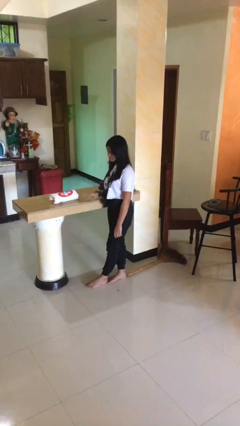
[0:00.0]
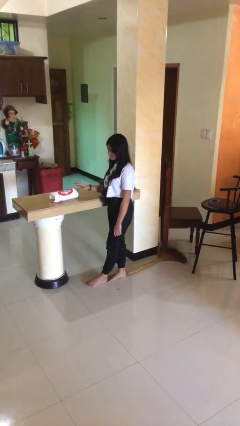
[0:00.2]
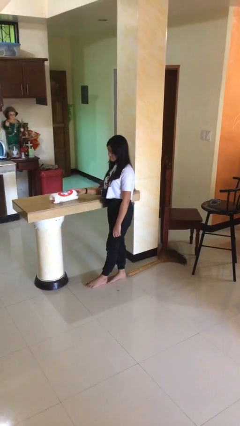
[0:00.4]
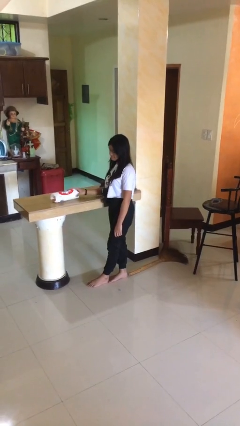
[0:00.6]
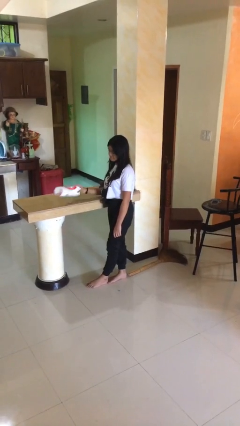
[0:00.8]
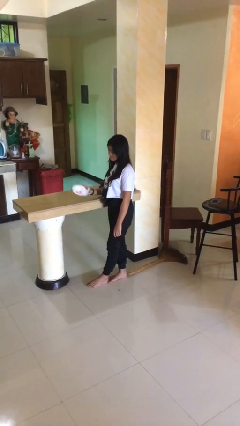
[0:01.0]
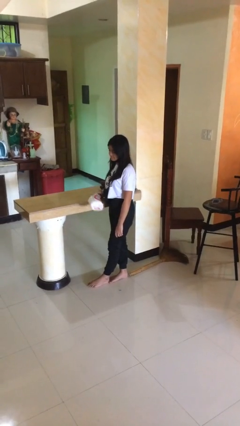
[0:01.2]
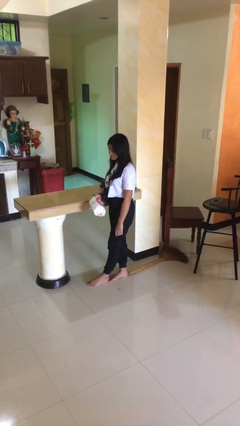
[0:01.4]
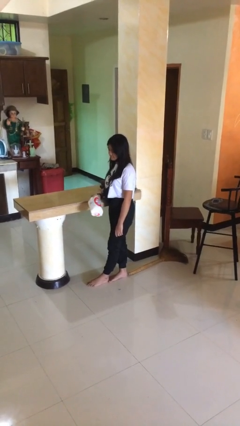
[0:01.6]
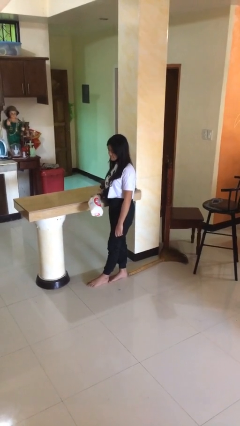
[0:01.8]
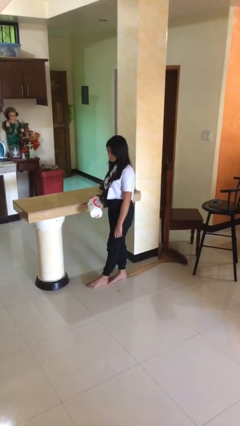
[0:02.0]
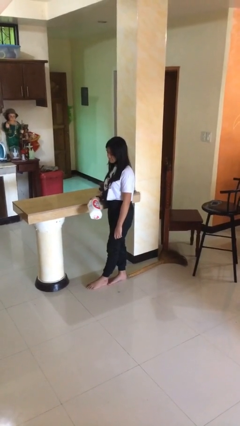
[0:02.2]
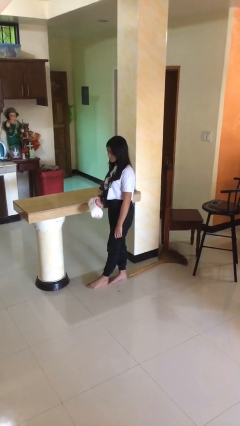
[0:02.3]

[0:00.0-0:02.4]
person picks up object from countertop

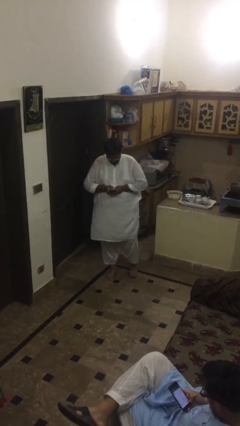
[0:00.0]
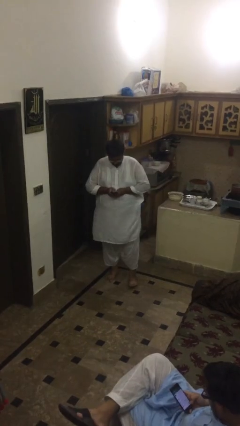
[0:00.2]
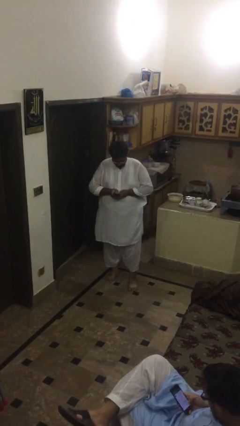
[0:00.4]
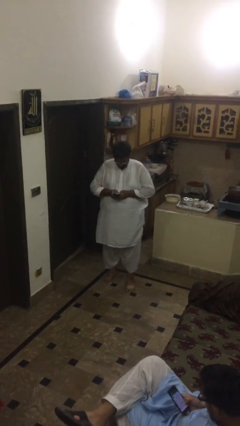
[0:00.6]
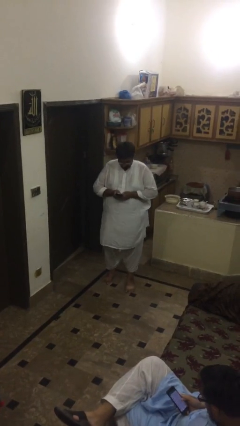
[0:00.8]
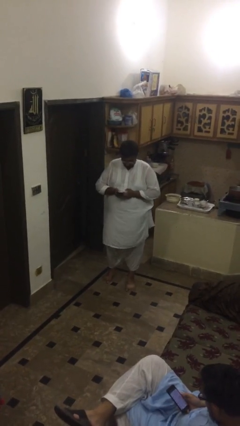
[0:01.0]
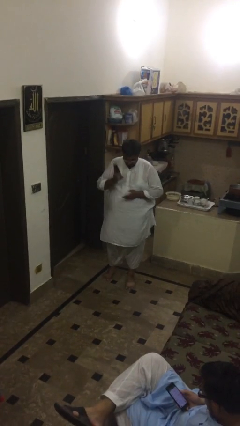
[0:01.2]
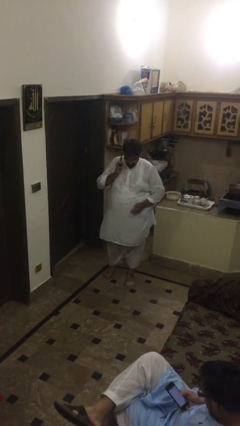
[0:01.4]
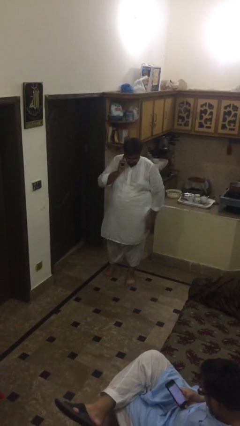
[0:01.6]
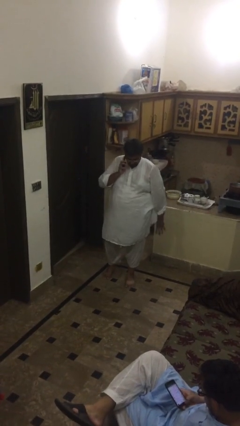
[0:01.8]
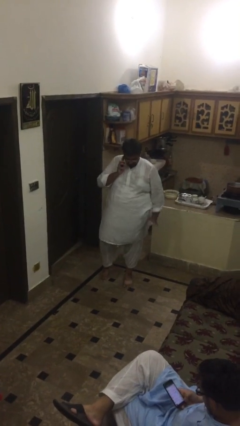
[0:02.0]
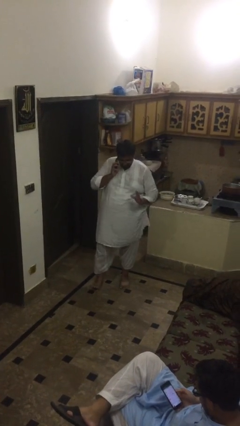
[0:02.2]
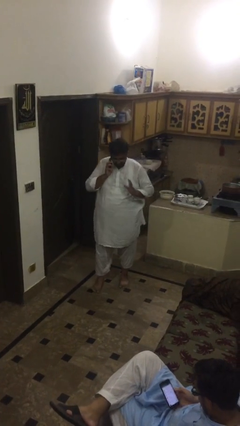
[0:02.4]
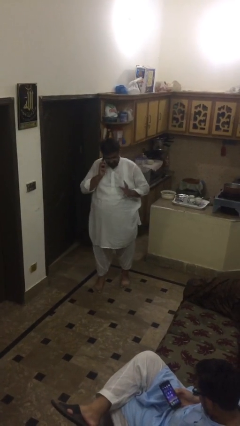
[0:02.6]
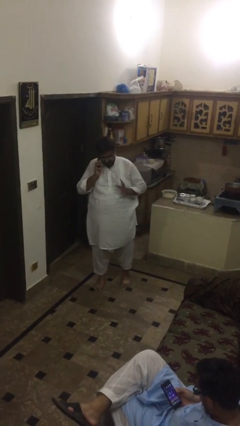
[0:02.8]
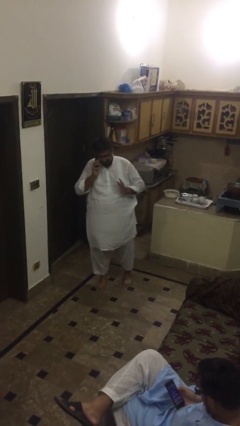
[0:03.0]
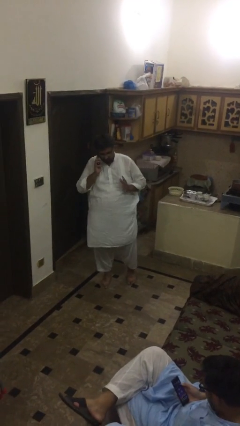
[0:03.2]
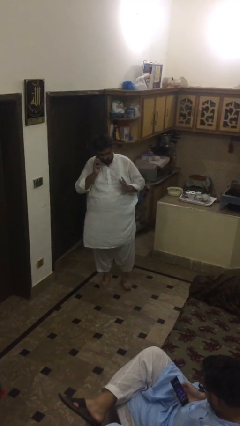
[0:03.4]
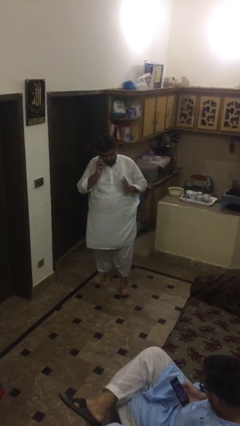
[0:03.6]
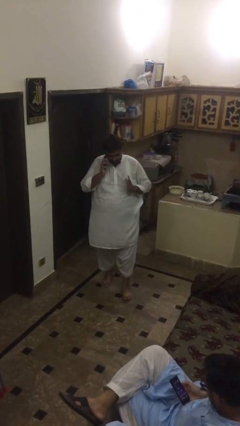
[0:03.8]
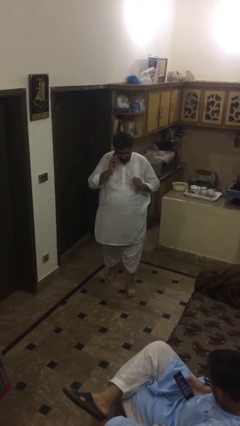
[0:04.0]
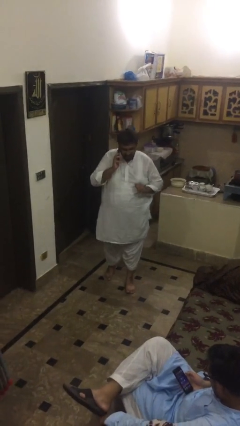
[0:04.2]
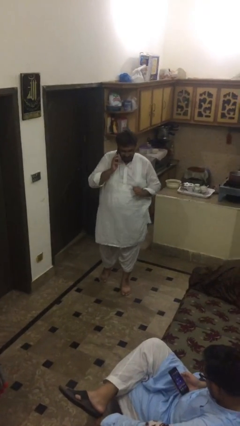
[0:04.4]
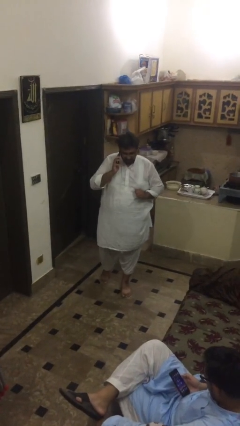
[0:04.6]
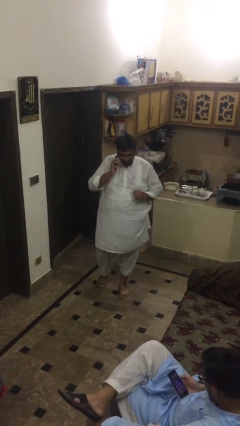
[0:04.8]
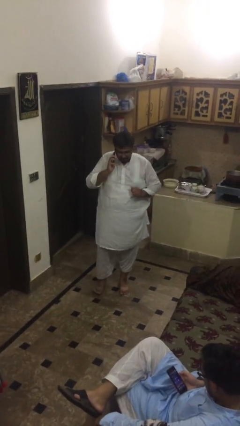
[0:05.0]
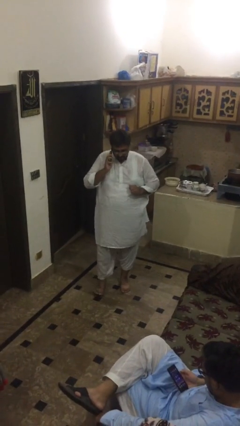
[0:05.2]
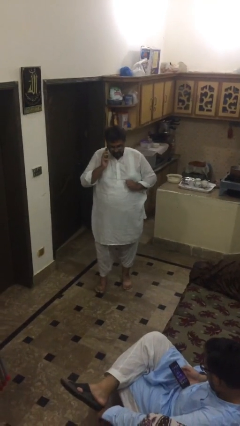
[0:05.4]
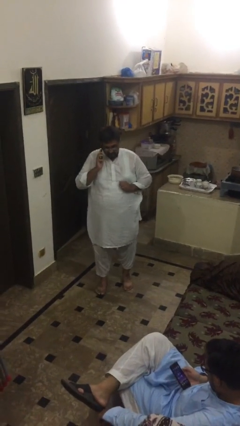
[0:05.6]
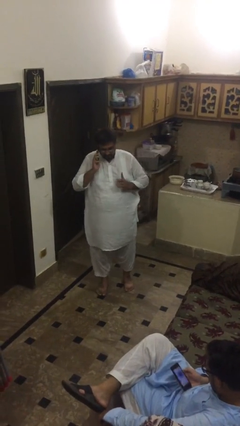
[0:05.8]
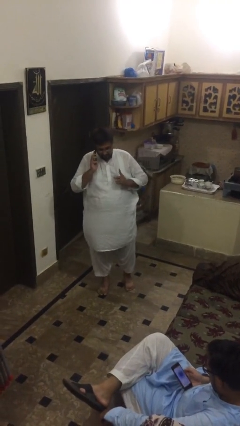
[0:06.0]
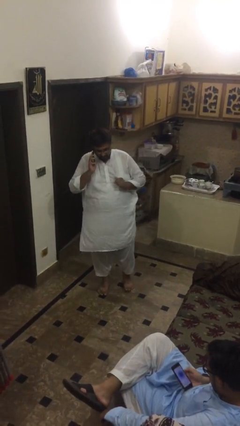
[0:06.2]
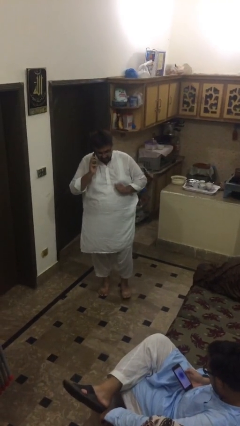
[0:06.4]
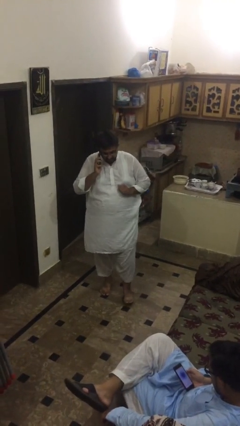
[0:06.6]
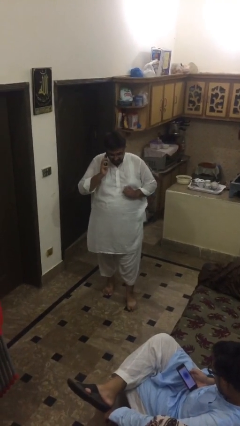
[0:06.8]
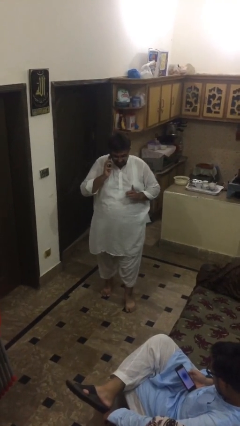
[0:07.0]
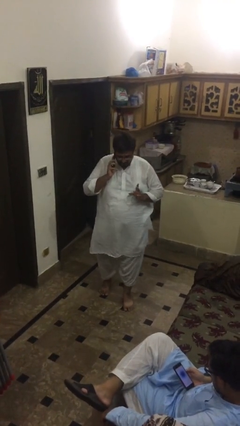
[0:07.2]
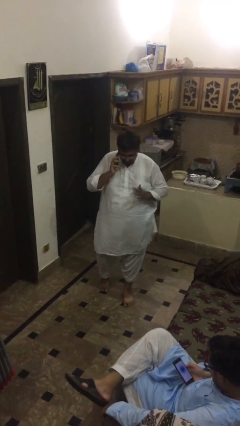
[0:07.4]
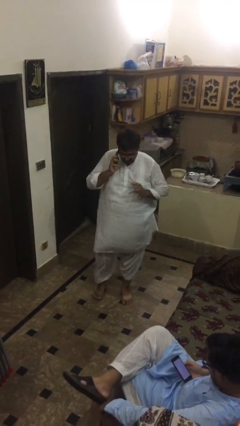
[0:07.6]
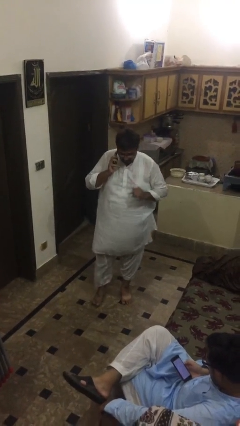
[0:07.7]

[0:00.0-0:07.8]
person talks on phone

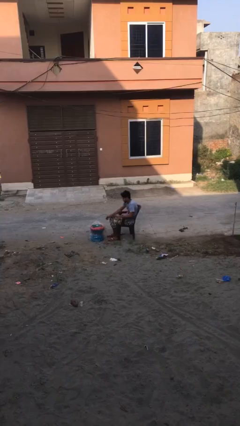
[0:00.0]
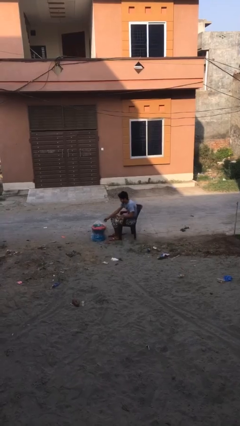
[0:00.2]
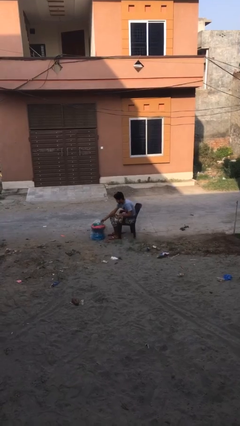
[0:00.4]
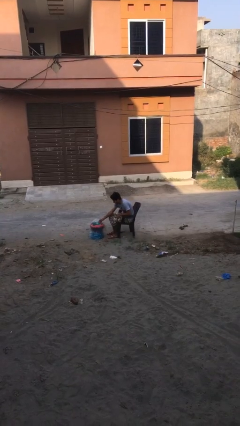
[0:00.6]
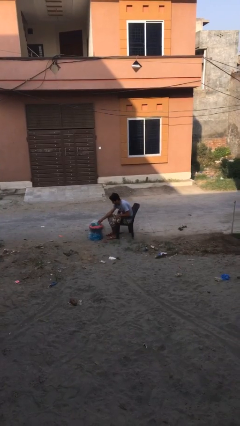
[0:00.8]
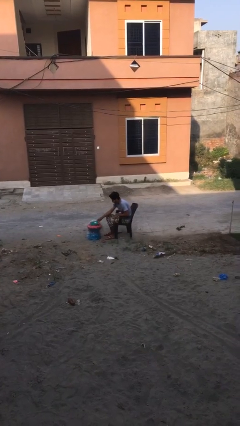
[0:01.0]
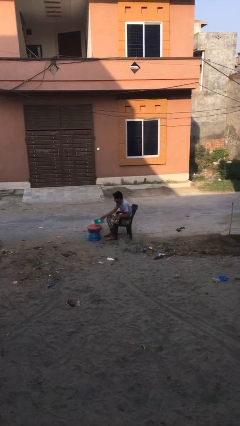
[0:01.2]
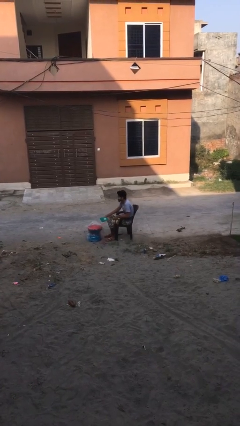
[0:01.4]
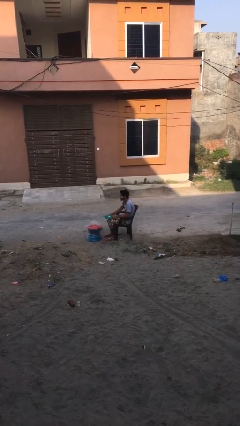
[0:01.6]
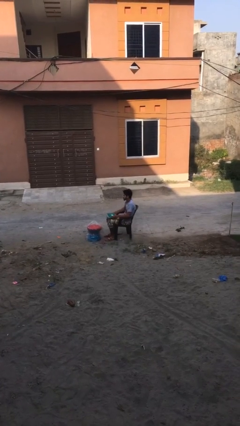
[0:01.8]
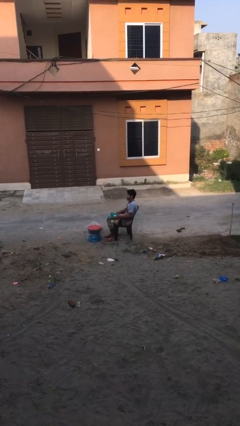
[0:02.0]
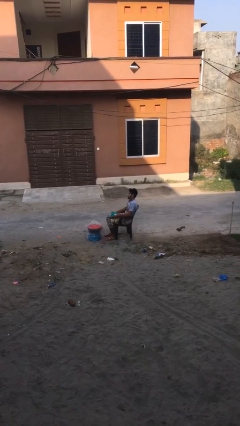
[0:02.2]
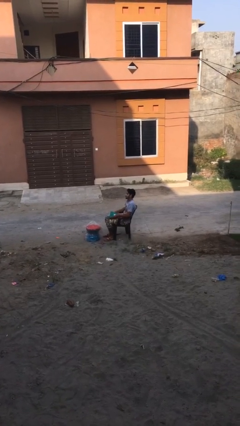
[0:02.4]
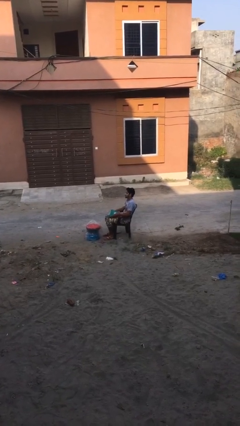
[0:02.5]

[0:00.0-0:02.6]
person picks up object from table

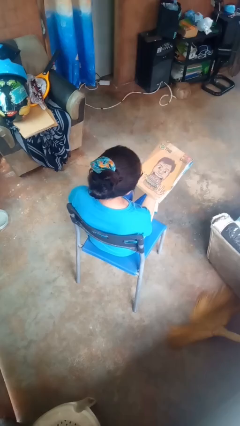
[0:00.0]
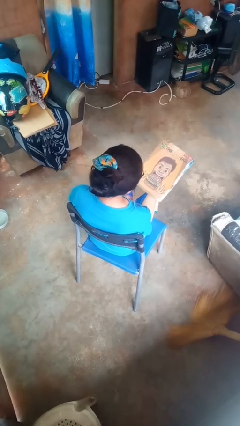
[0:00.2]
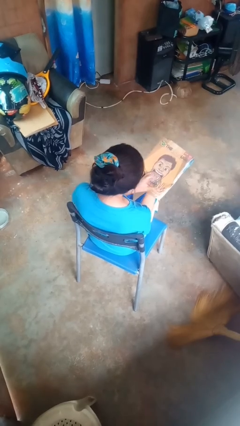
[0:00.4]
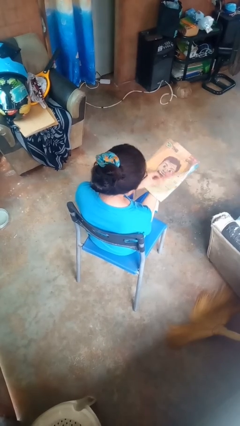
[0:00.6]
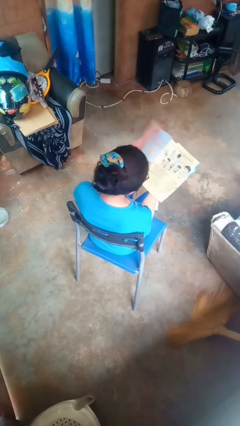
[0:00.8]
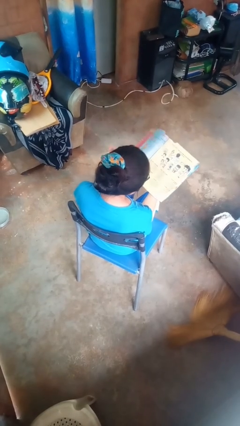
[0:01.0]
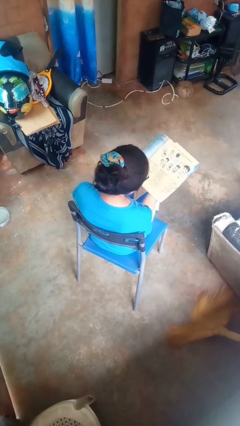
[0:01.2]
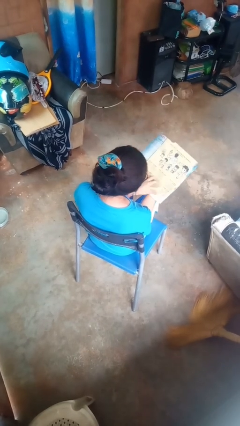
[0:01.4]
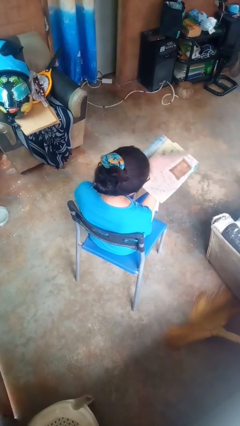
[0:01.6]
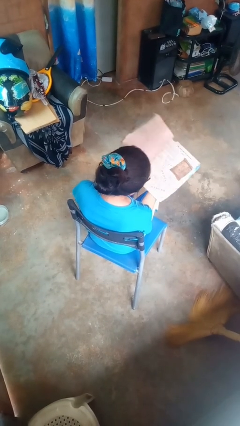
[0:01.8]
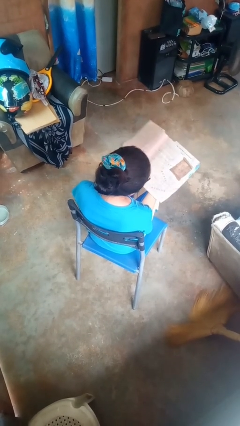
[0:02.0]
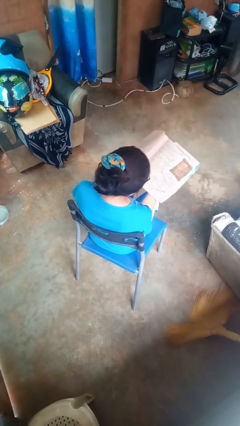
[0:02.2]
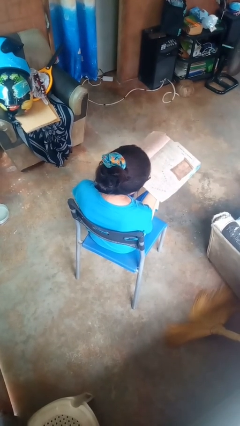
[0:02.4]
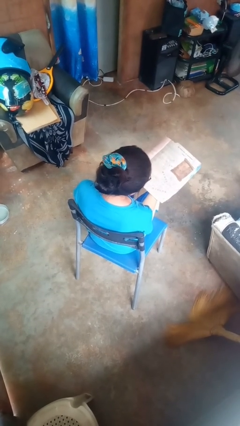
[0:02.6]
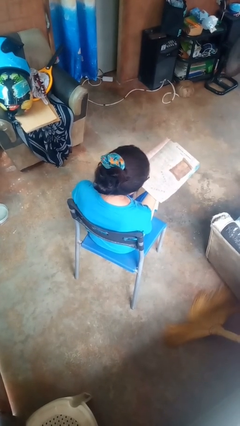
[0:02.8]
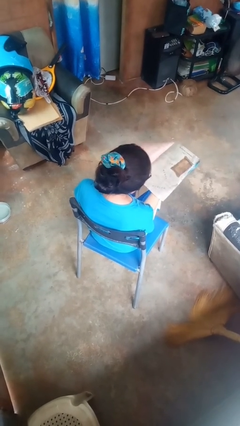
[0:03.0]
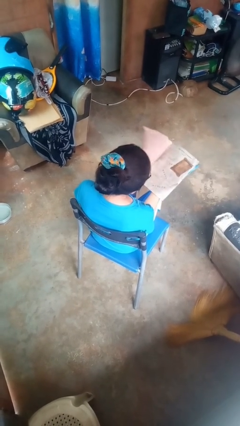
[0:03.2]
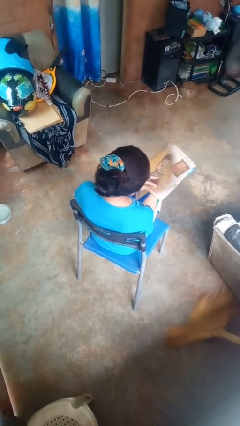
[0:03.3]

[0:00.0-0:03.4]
person reads magazine

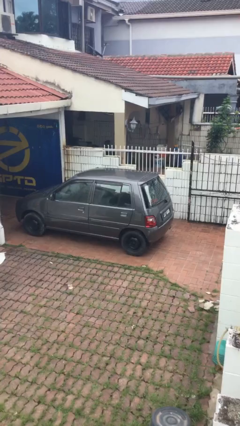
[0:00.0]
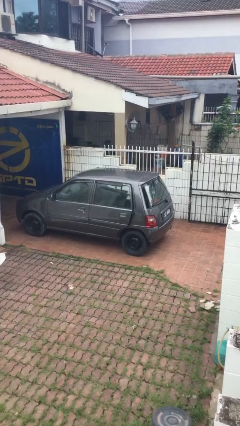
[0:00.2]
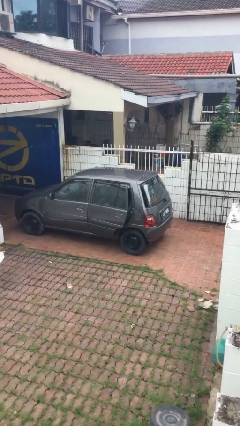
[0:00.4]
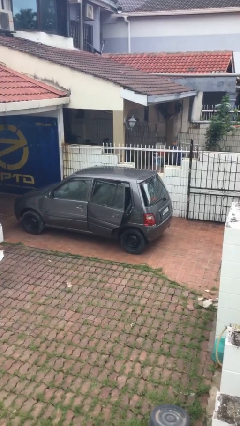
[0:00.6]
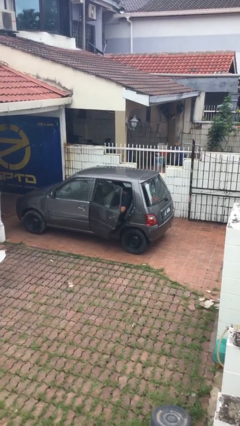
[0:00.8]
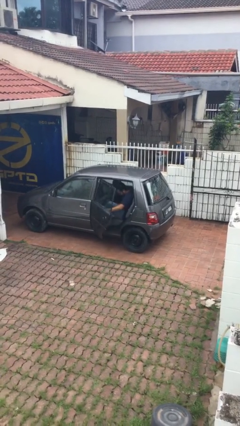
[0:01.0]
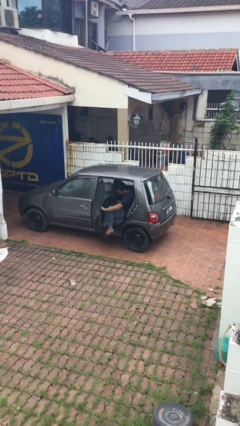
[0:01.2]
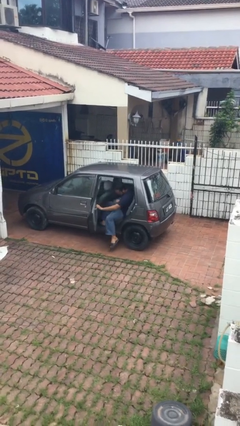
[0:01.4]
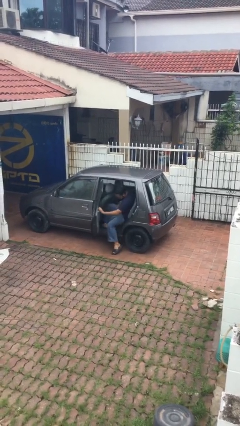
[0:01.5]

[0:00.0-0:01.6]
person opens car door
